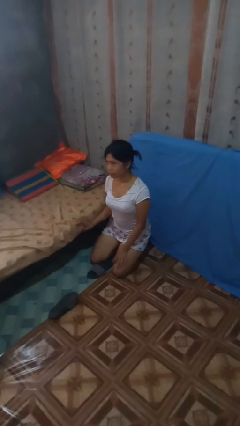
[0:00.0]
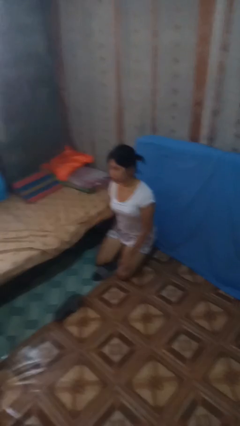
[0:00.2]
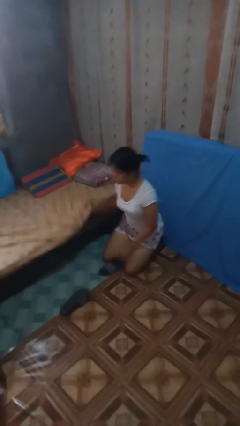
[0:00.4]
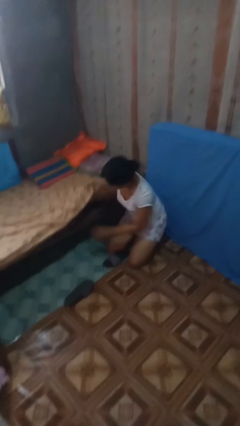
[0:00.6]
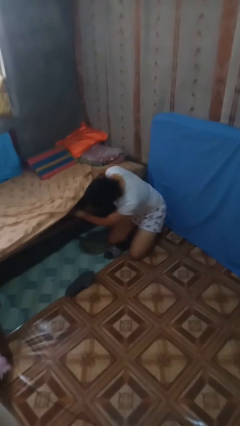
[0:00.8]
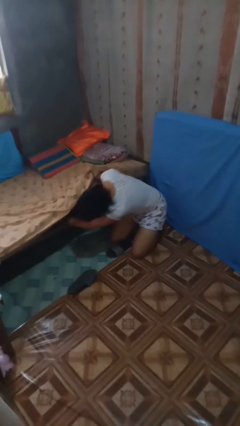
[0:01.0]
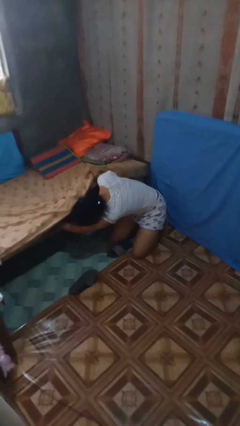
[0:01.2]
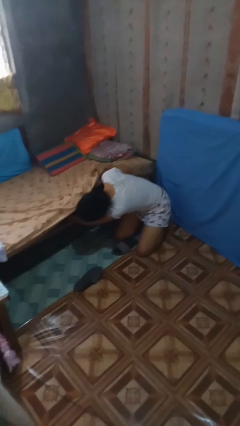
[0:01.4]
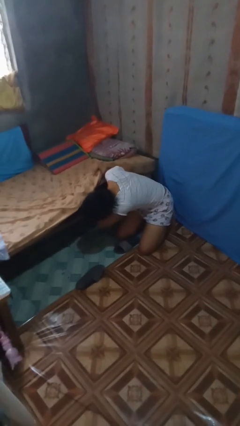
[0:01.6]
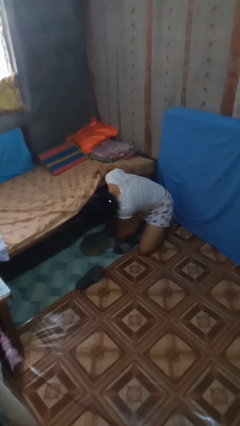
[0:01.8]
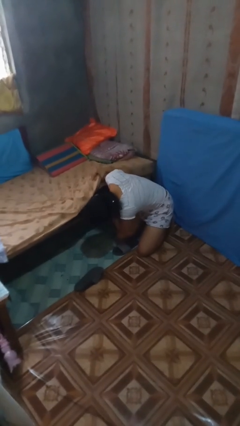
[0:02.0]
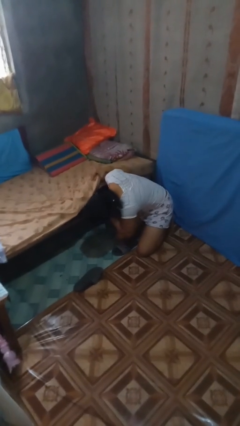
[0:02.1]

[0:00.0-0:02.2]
person searches under bed

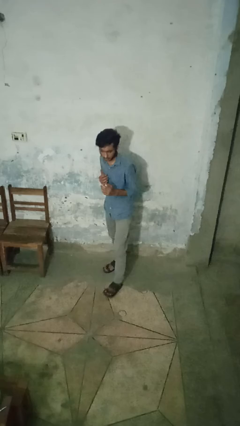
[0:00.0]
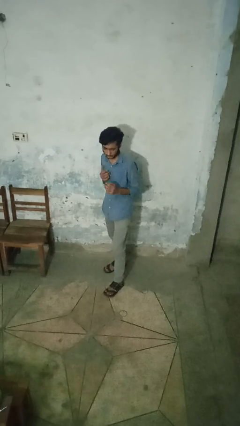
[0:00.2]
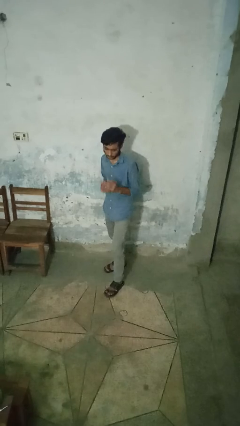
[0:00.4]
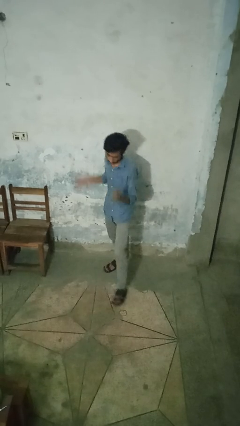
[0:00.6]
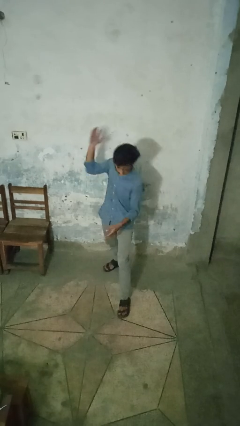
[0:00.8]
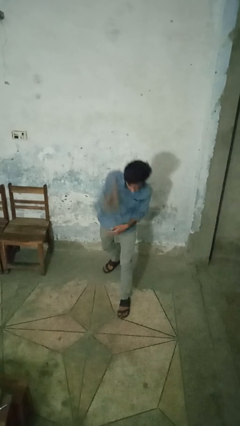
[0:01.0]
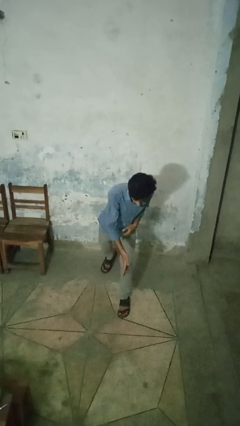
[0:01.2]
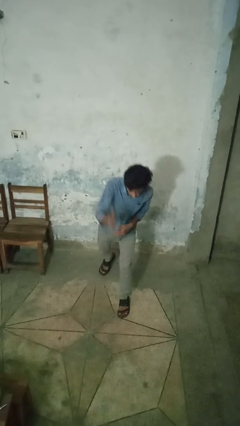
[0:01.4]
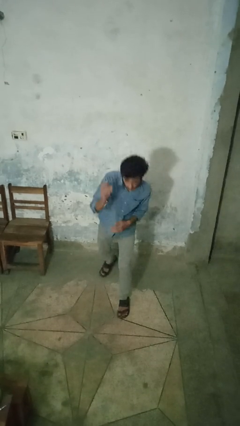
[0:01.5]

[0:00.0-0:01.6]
person karate chop

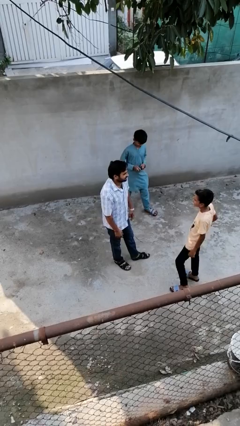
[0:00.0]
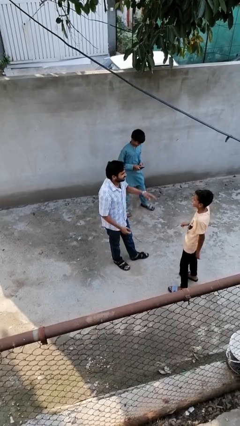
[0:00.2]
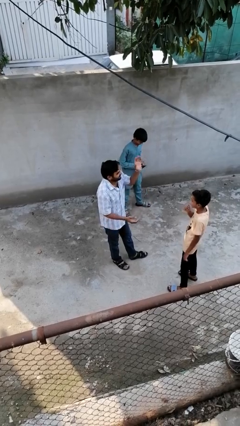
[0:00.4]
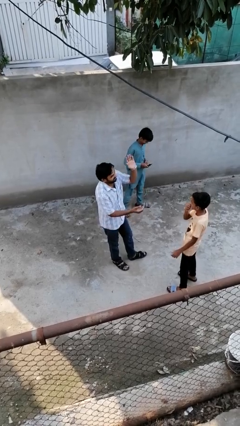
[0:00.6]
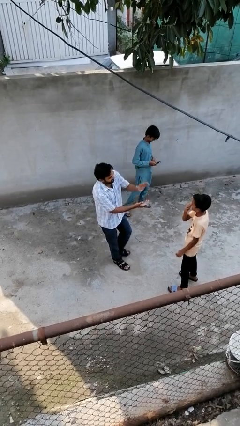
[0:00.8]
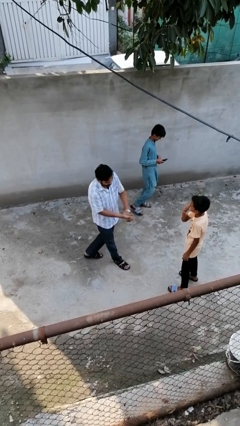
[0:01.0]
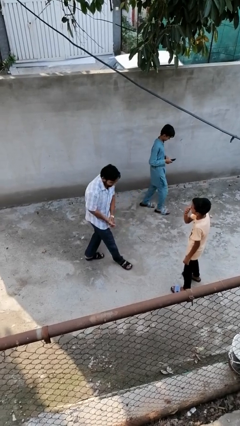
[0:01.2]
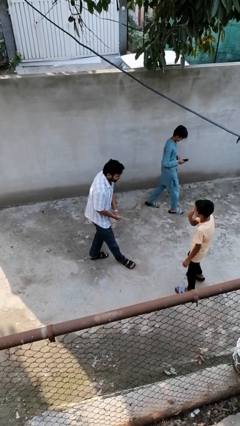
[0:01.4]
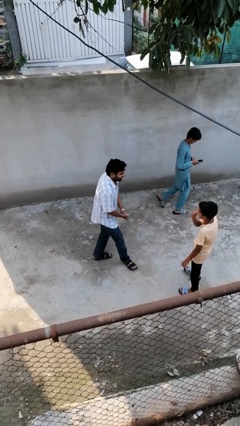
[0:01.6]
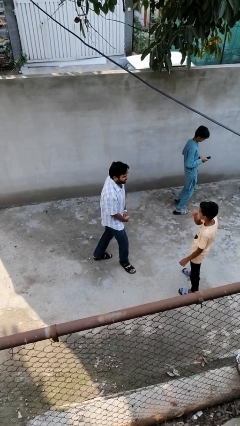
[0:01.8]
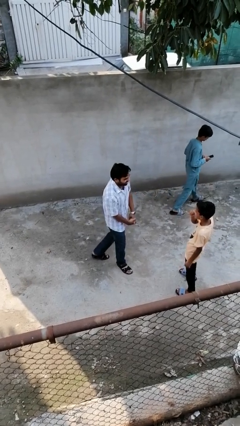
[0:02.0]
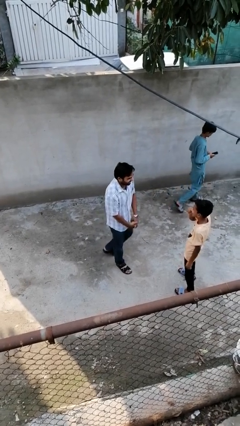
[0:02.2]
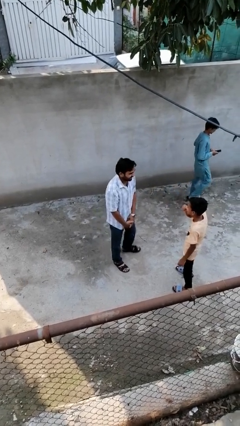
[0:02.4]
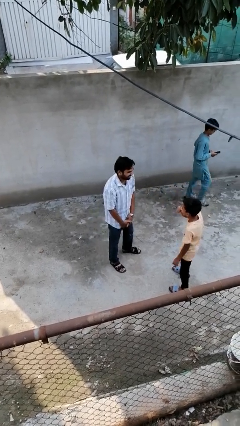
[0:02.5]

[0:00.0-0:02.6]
person laughs with person

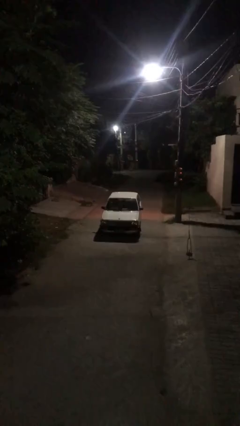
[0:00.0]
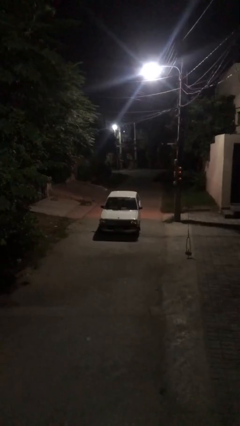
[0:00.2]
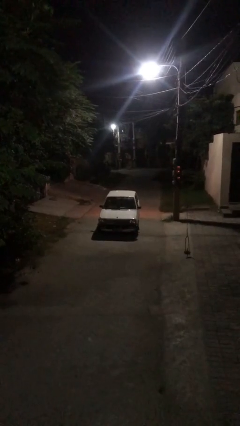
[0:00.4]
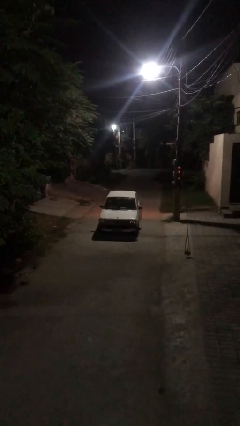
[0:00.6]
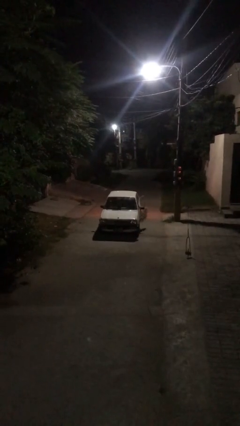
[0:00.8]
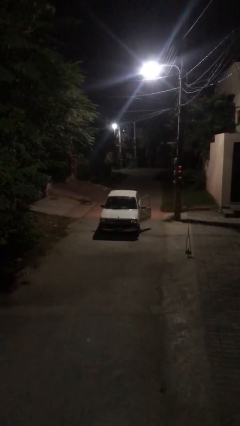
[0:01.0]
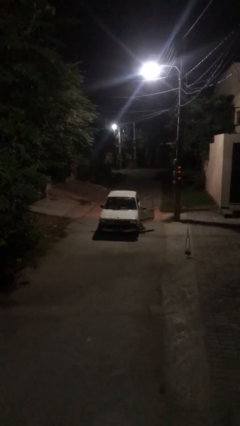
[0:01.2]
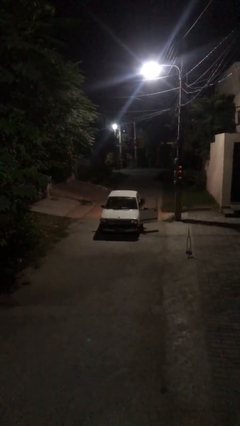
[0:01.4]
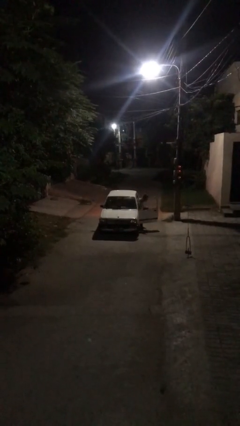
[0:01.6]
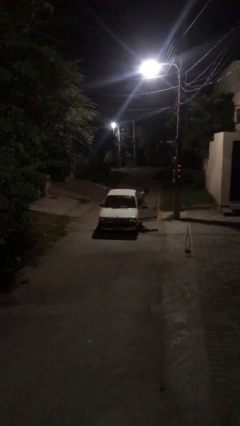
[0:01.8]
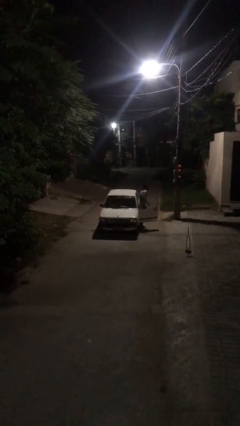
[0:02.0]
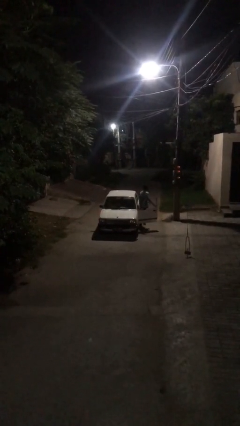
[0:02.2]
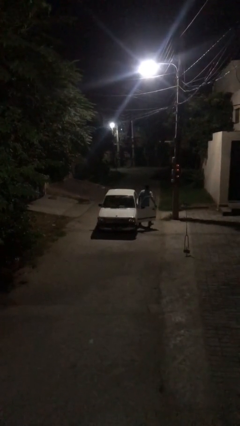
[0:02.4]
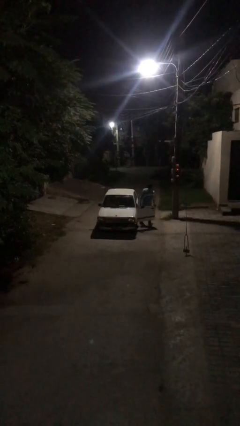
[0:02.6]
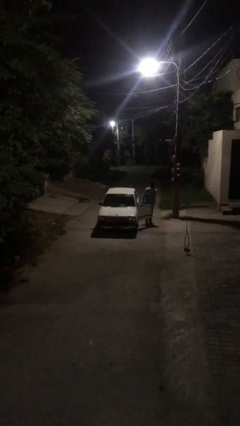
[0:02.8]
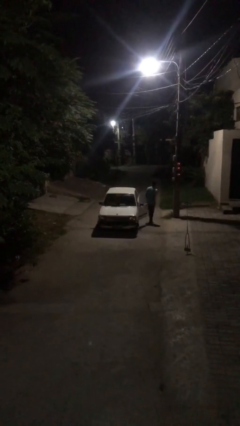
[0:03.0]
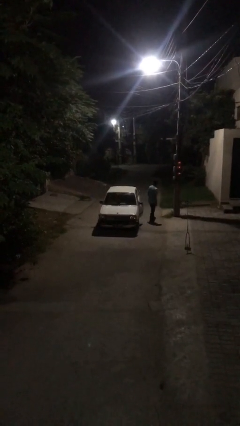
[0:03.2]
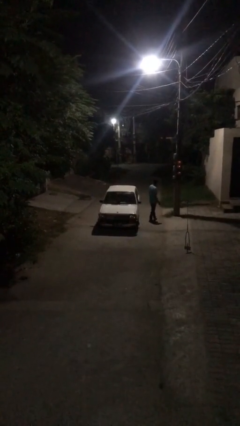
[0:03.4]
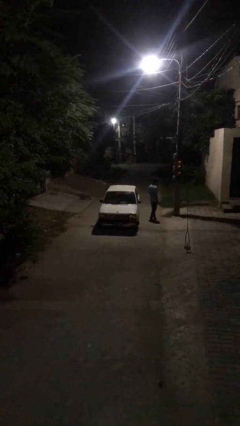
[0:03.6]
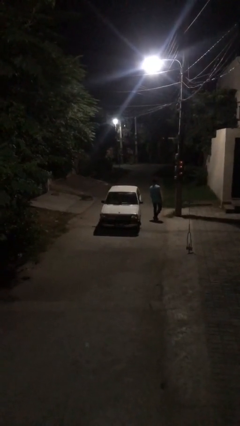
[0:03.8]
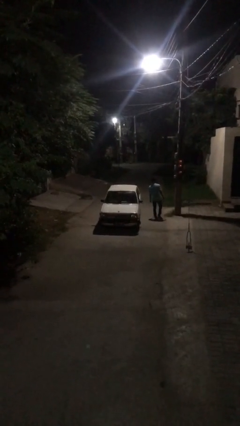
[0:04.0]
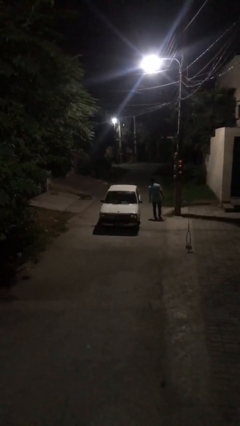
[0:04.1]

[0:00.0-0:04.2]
car drops off person

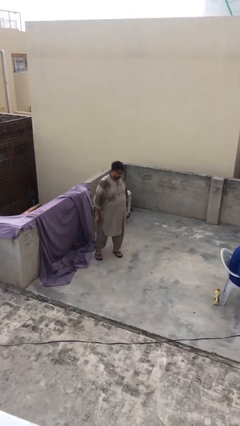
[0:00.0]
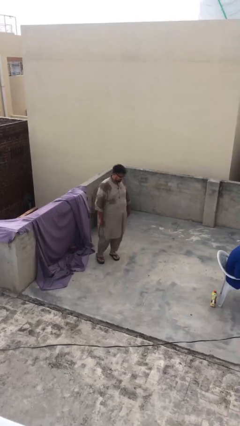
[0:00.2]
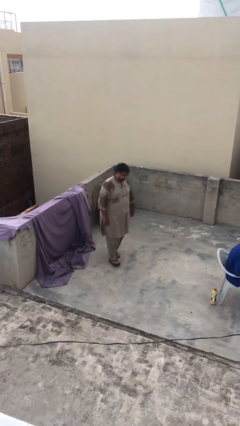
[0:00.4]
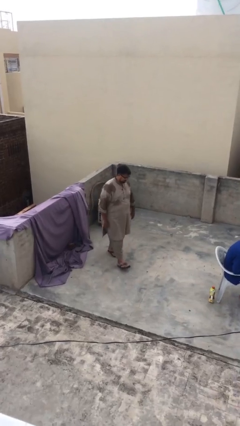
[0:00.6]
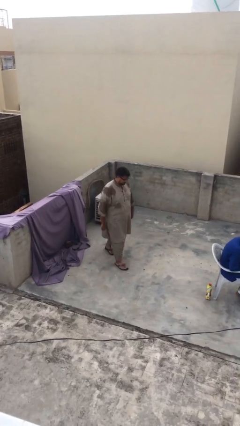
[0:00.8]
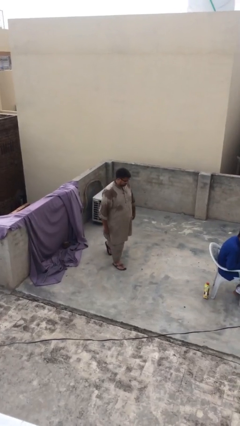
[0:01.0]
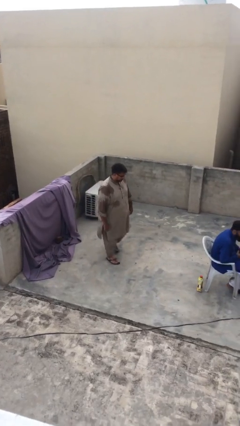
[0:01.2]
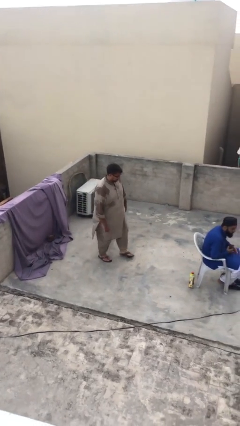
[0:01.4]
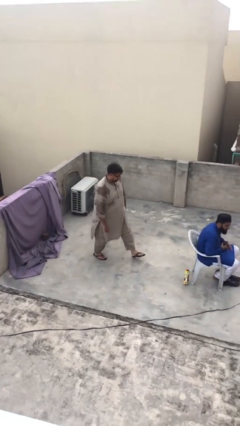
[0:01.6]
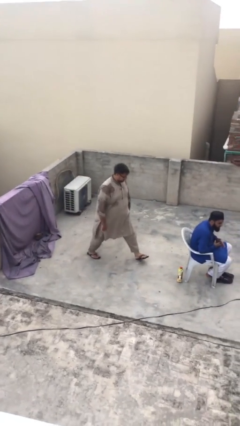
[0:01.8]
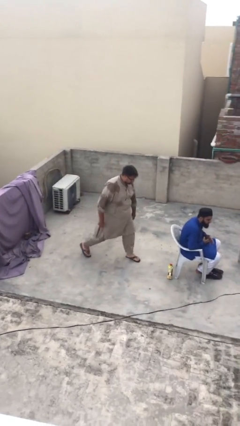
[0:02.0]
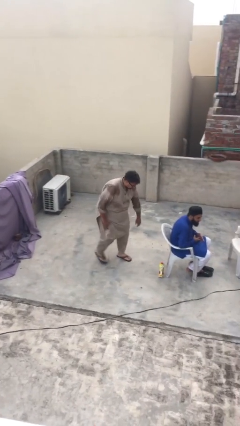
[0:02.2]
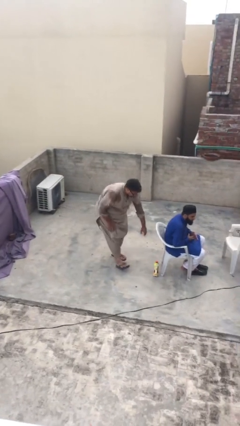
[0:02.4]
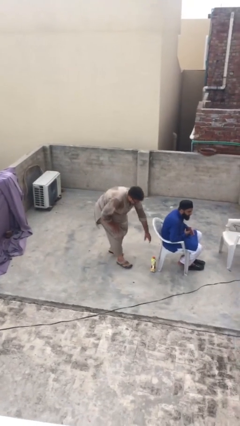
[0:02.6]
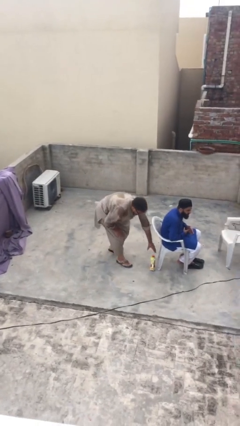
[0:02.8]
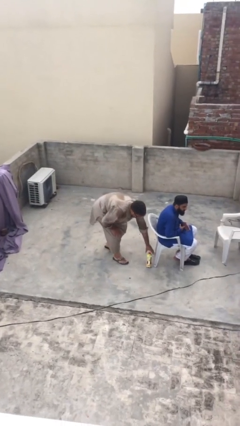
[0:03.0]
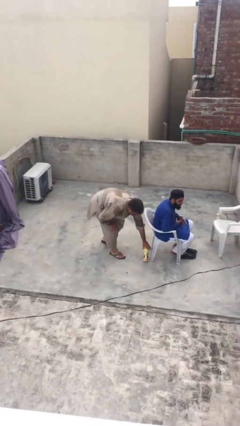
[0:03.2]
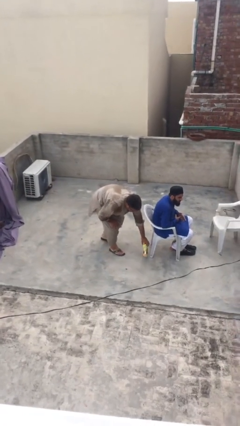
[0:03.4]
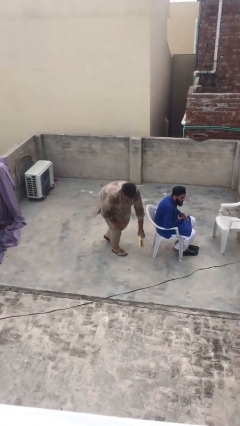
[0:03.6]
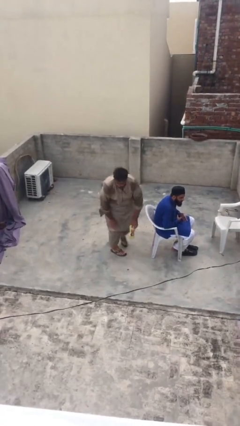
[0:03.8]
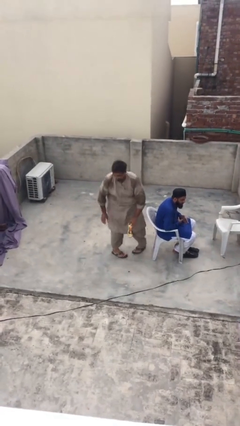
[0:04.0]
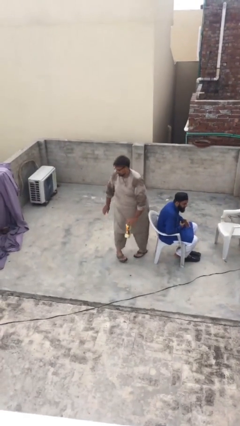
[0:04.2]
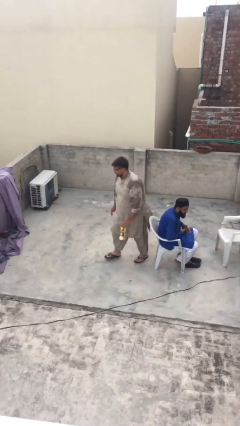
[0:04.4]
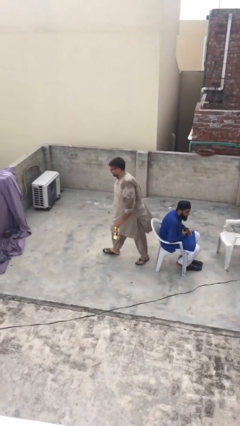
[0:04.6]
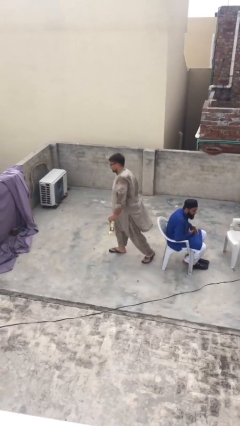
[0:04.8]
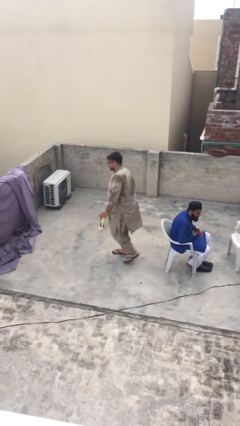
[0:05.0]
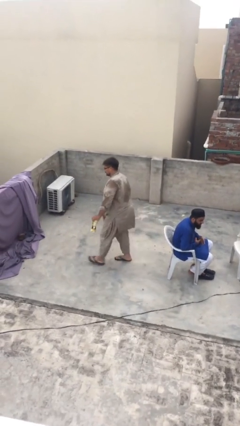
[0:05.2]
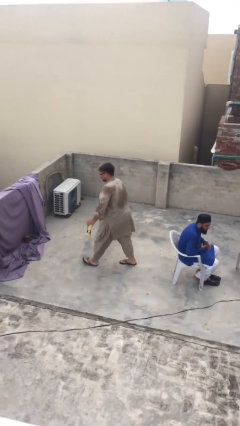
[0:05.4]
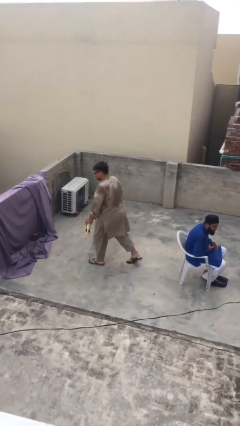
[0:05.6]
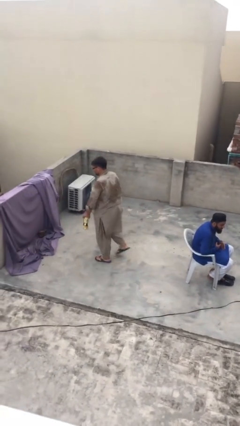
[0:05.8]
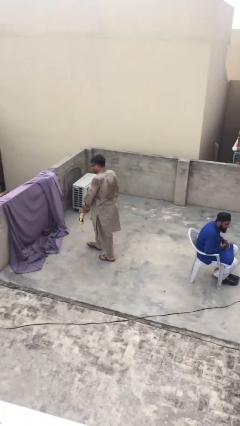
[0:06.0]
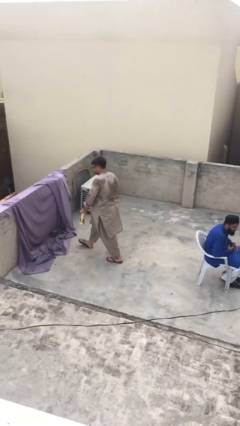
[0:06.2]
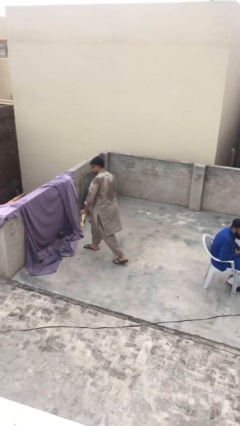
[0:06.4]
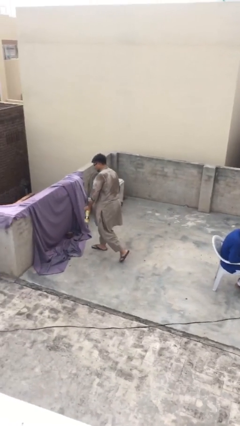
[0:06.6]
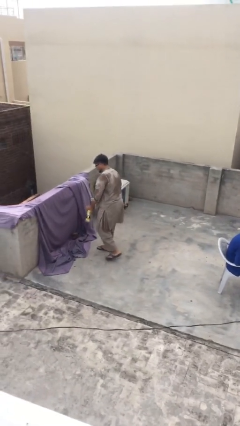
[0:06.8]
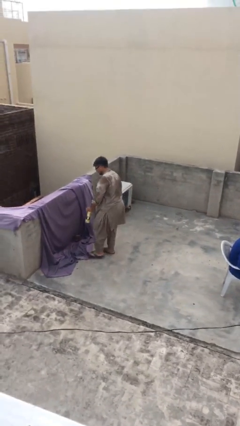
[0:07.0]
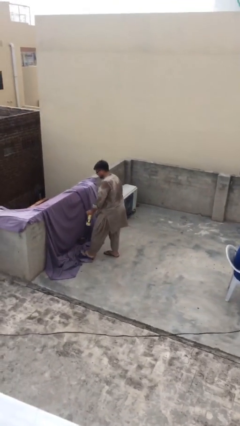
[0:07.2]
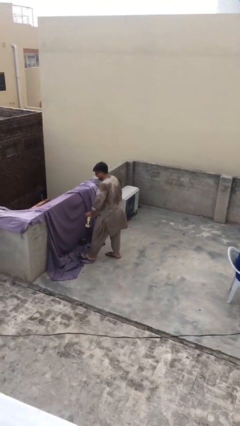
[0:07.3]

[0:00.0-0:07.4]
person steals object from person
